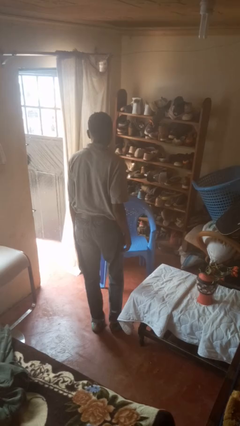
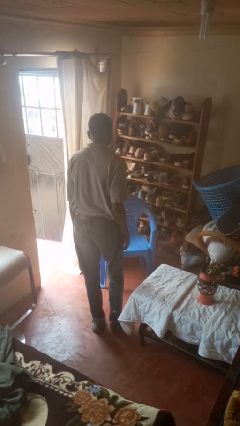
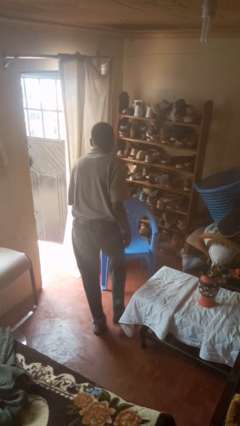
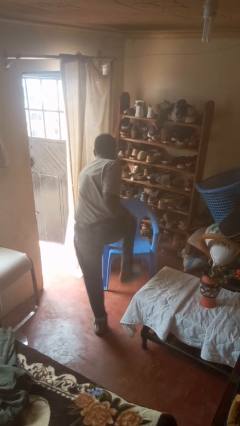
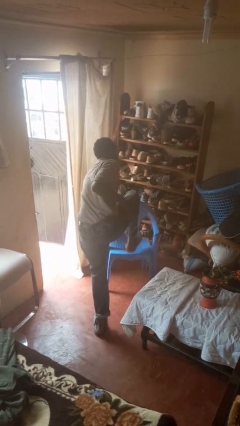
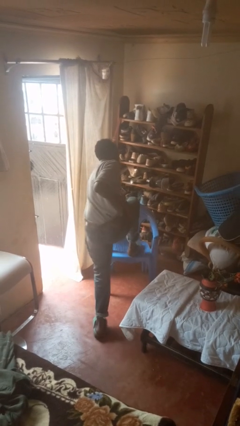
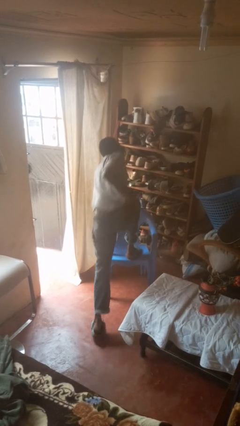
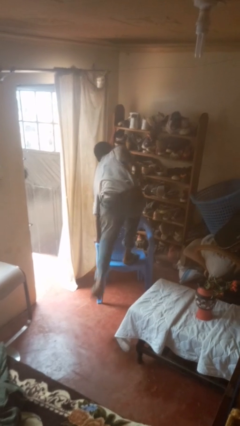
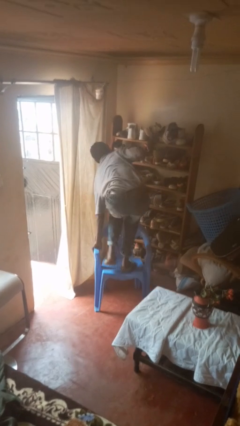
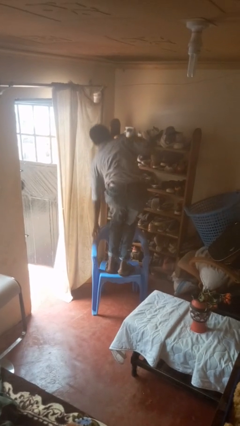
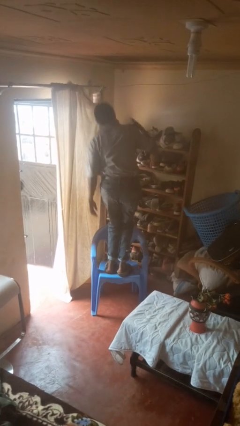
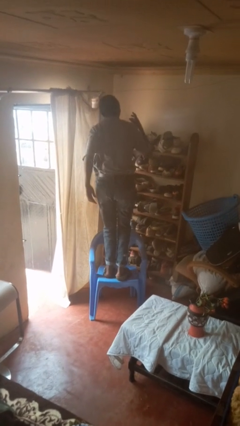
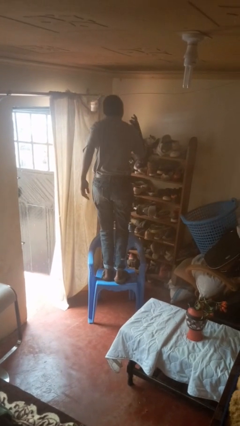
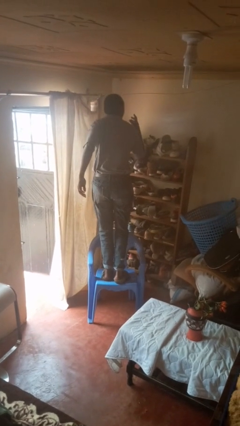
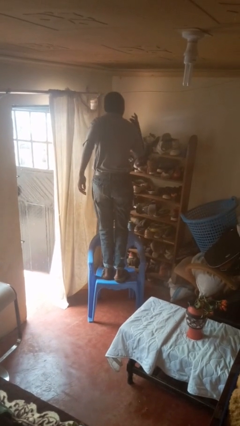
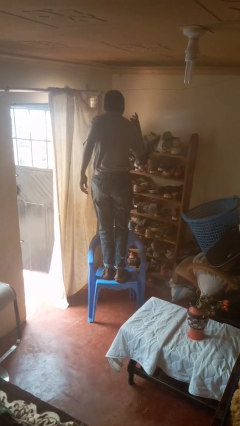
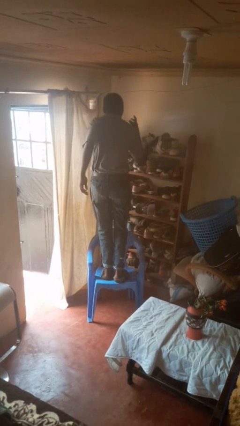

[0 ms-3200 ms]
person climbs on chair

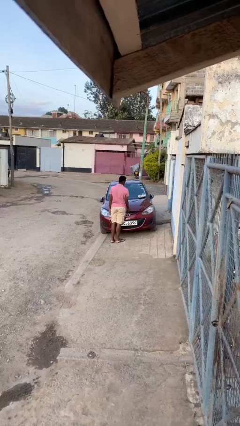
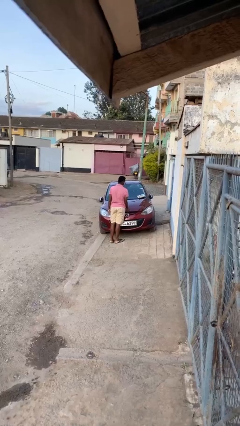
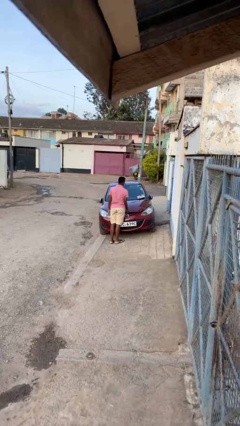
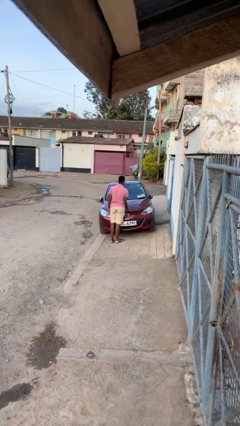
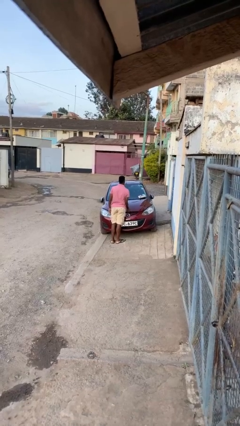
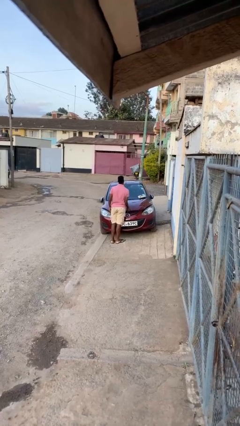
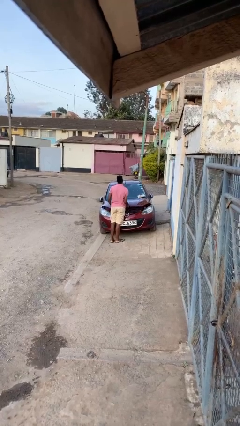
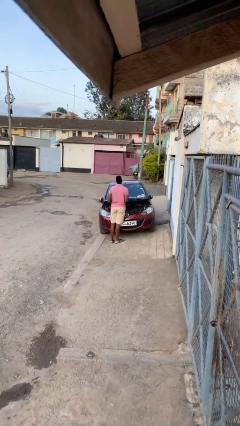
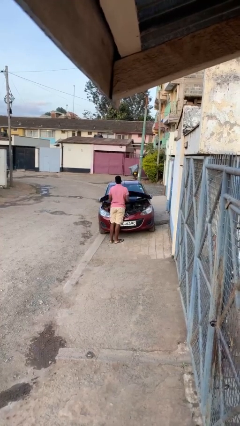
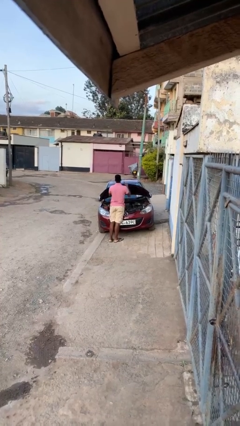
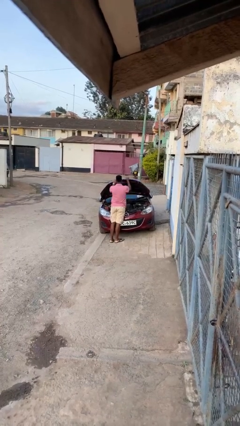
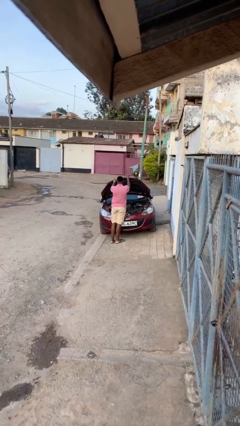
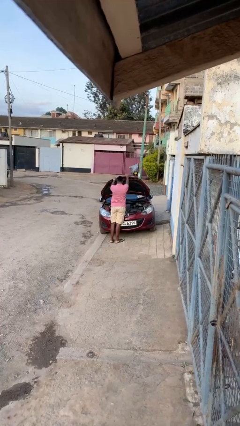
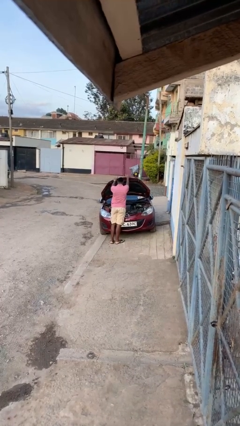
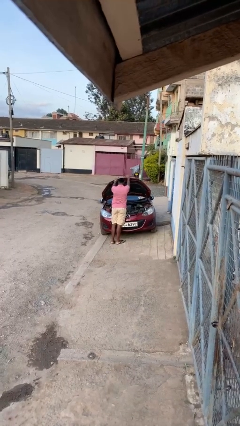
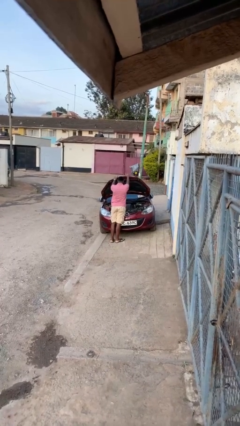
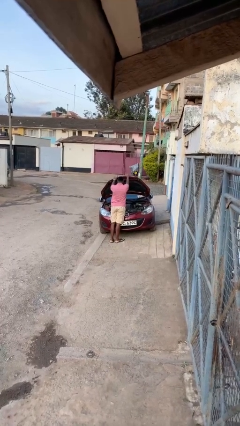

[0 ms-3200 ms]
person opens car hood

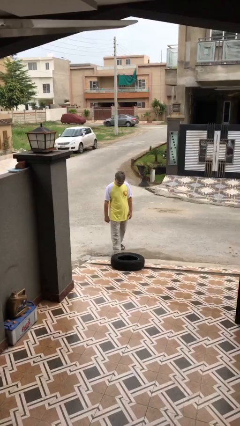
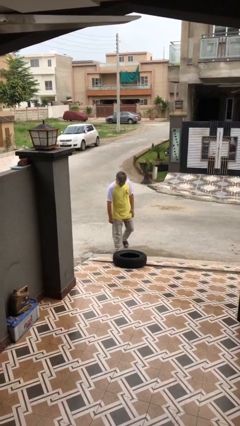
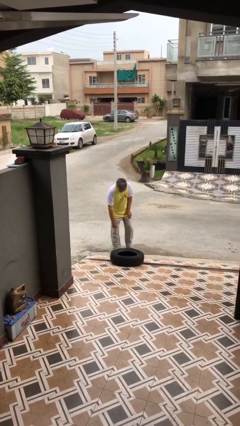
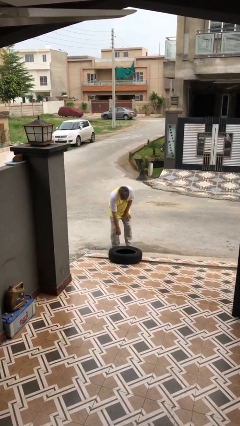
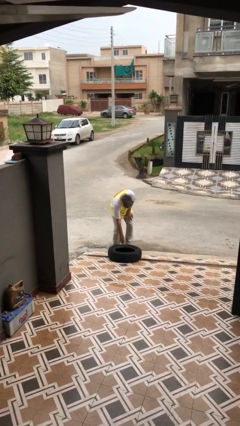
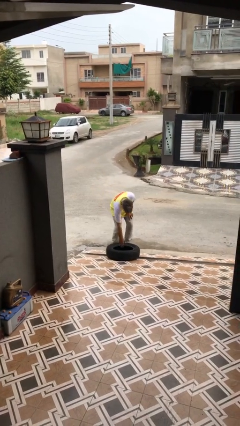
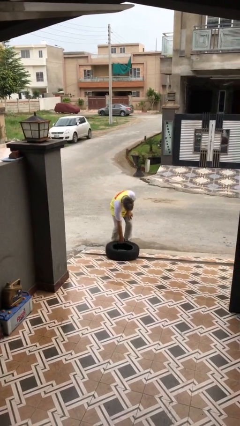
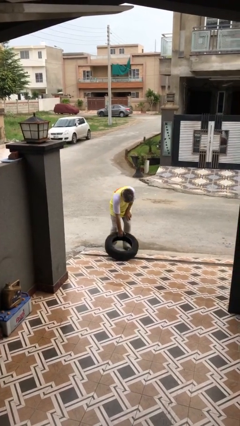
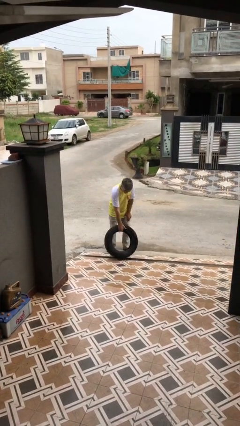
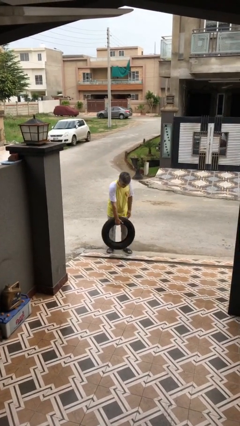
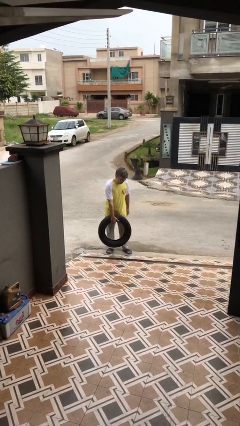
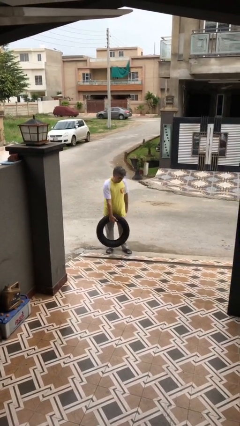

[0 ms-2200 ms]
person picks up object from floor

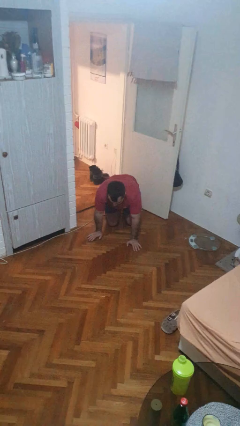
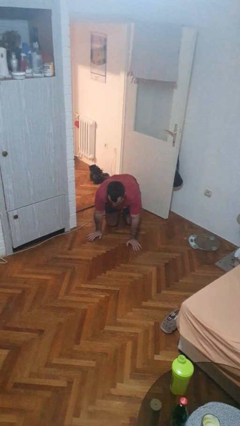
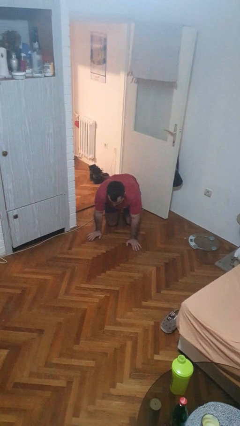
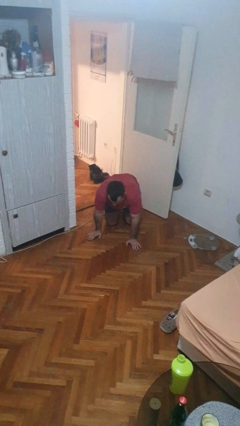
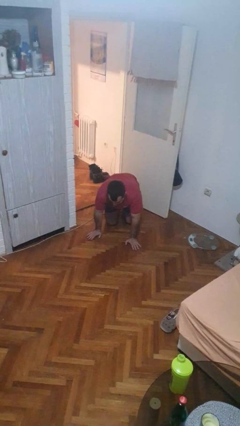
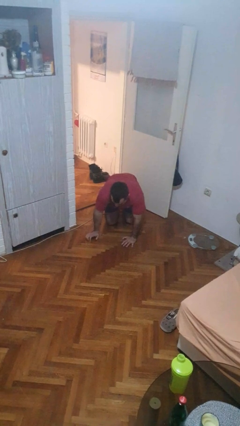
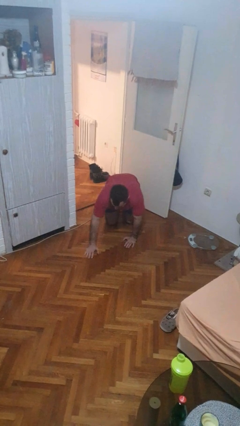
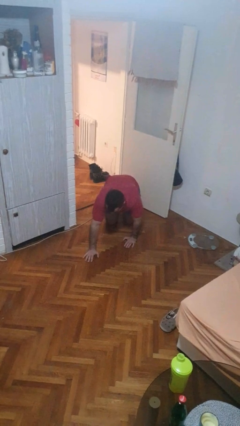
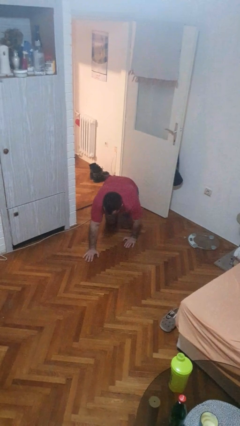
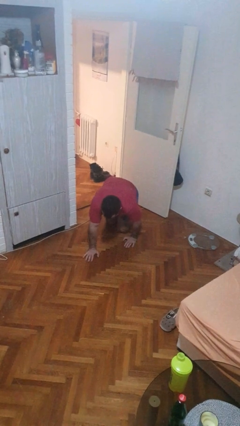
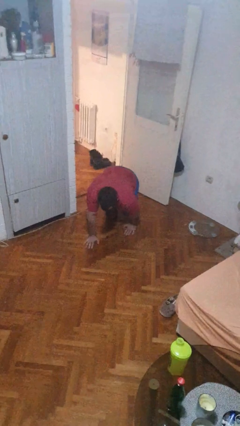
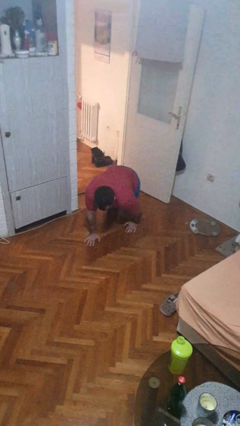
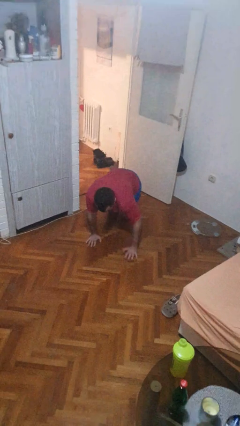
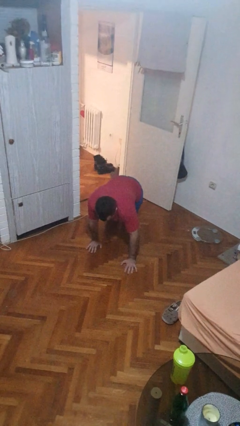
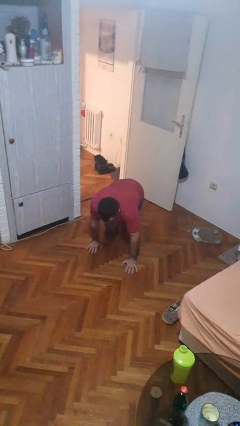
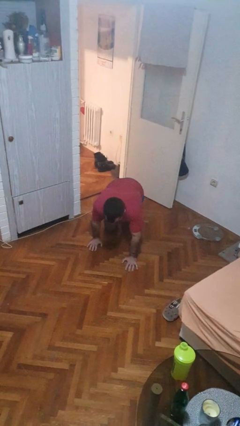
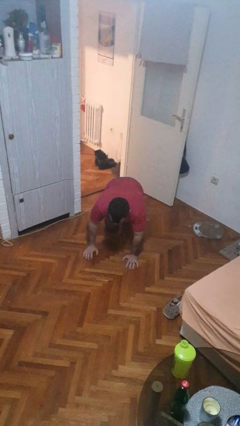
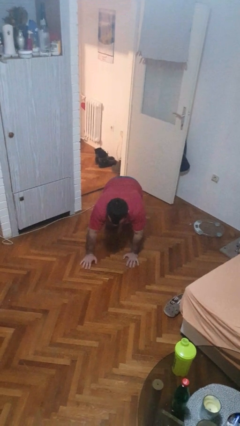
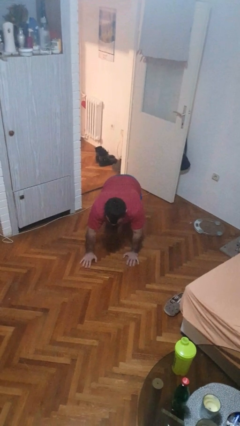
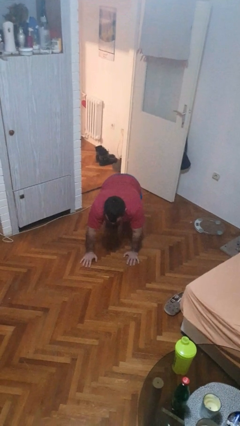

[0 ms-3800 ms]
person crawls

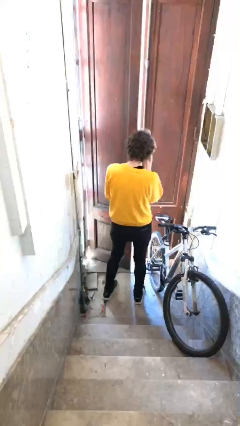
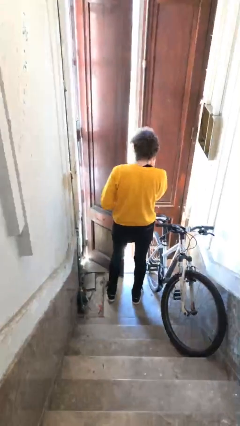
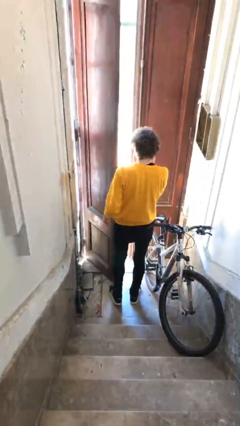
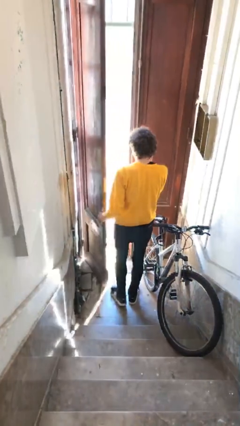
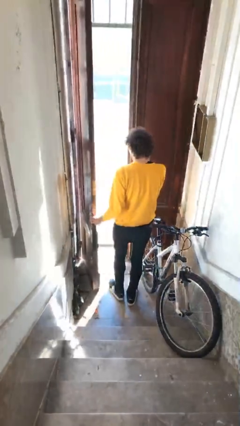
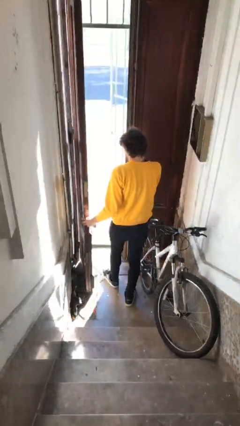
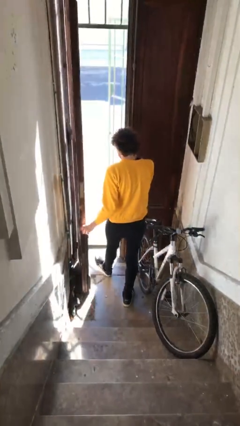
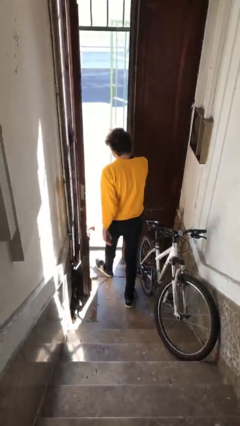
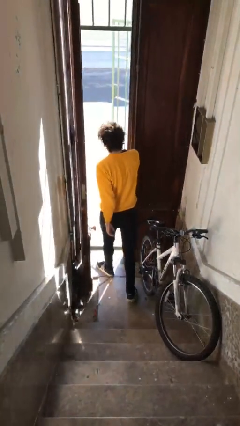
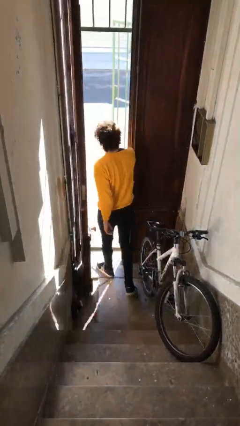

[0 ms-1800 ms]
person opens facility door

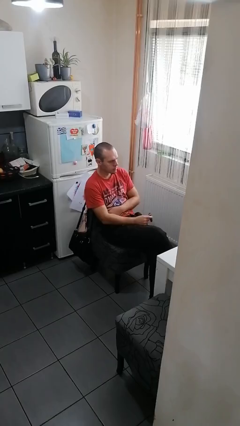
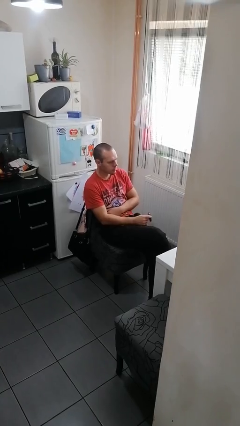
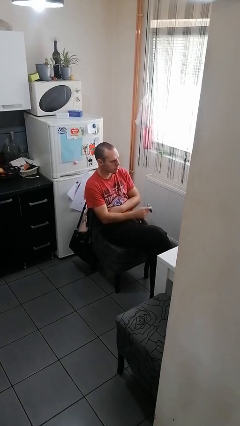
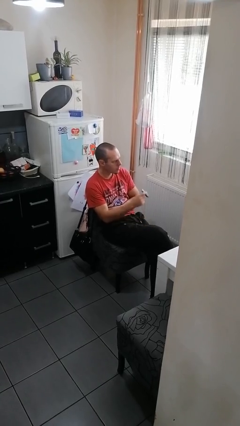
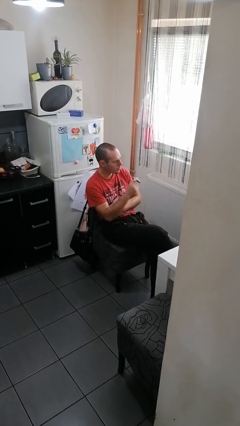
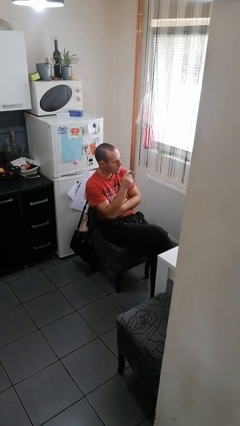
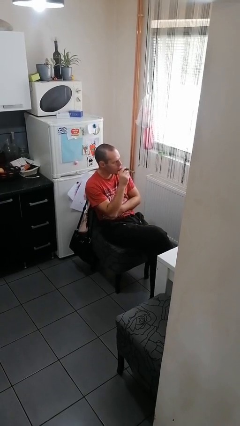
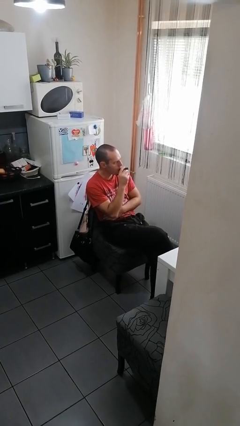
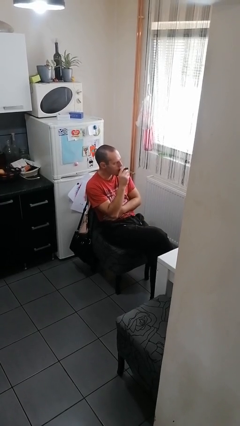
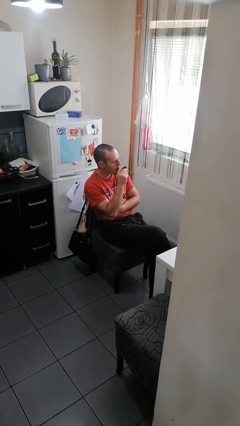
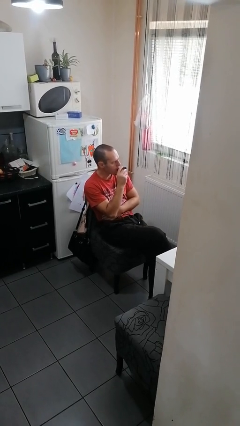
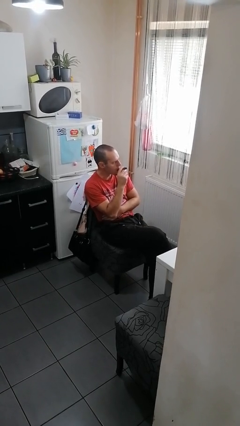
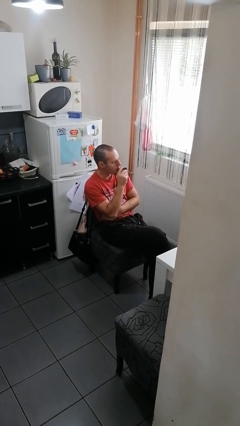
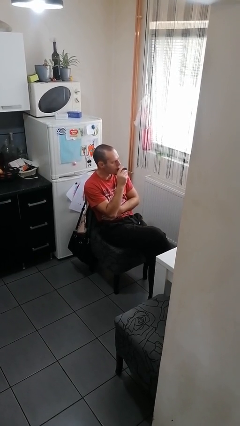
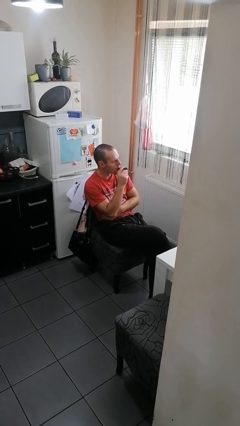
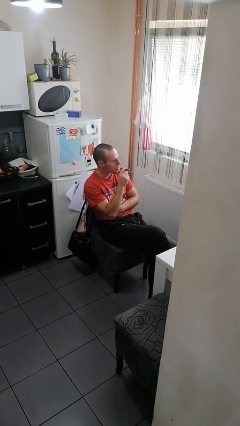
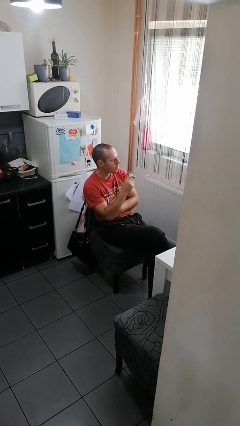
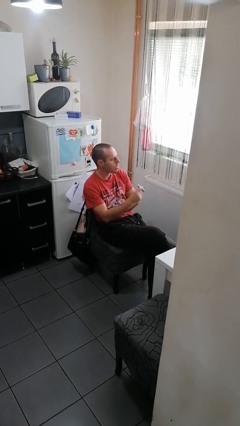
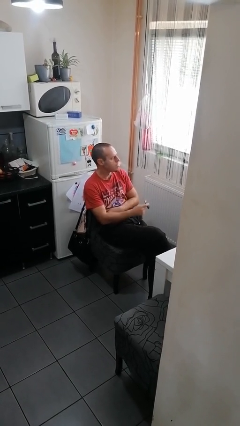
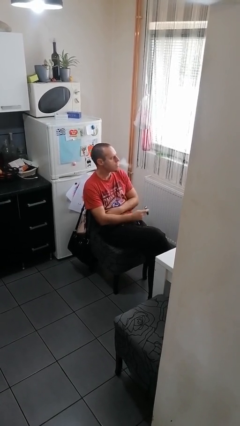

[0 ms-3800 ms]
person vapes
